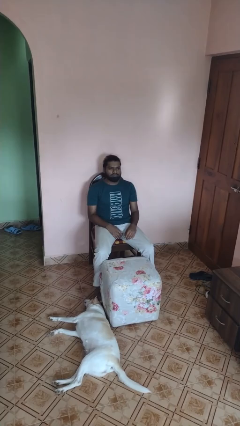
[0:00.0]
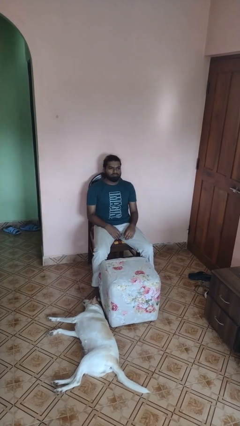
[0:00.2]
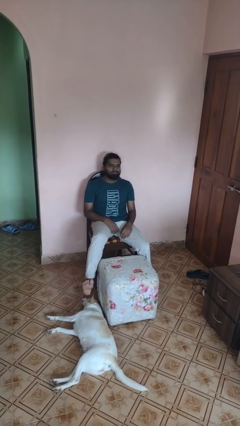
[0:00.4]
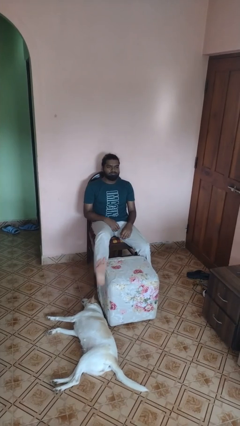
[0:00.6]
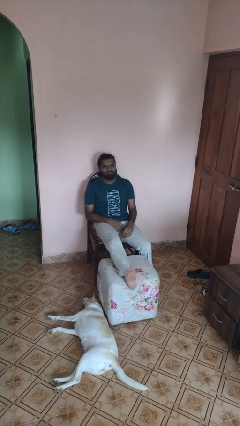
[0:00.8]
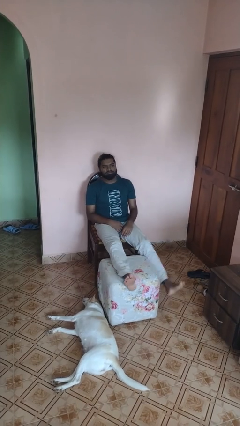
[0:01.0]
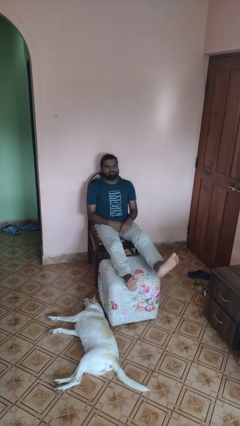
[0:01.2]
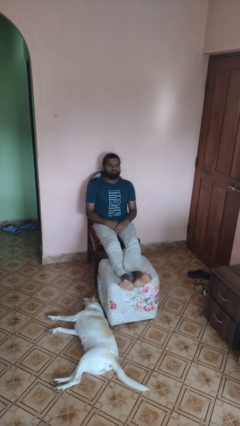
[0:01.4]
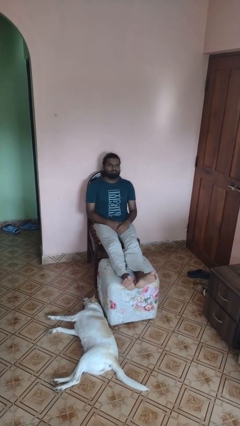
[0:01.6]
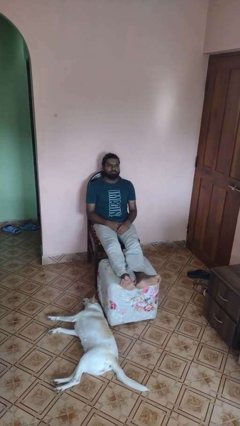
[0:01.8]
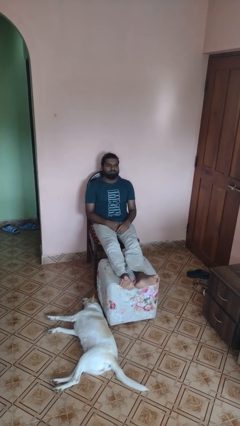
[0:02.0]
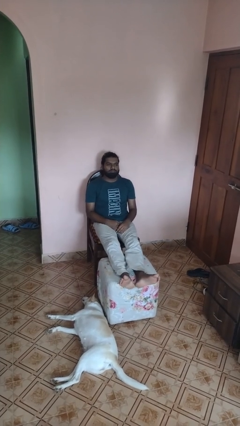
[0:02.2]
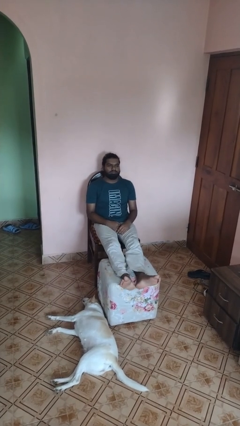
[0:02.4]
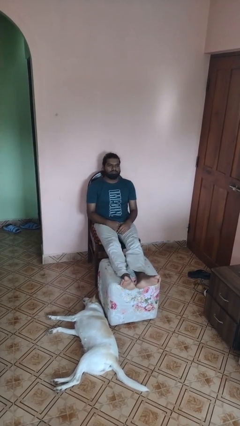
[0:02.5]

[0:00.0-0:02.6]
person puts feet up

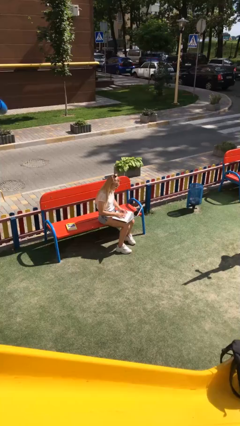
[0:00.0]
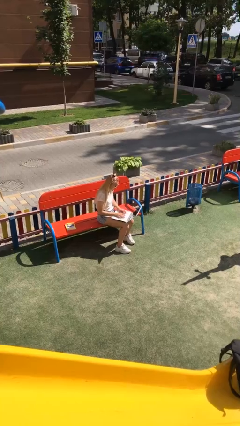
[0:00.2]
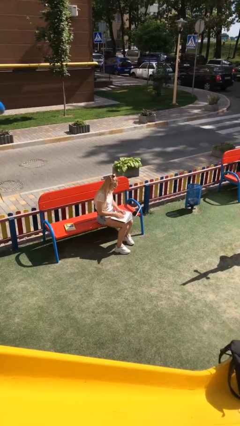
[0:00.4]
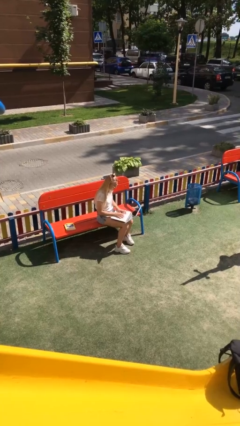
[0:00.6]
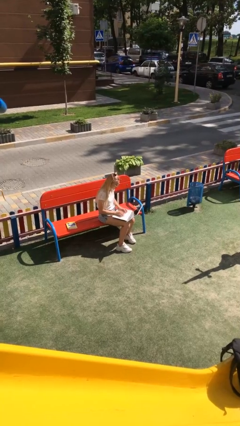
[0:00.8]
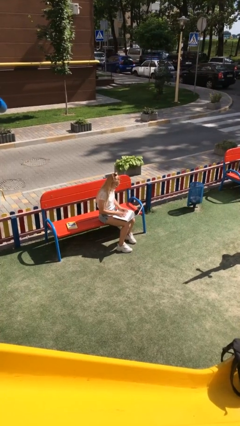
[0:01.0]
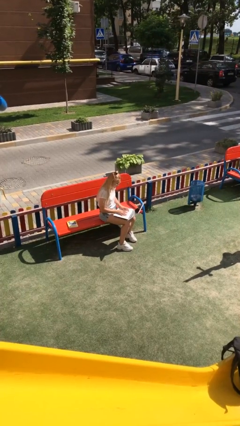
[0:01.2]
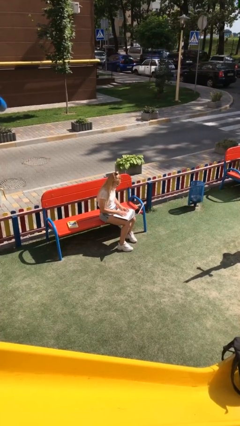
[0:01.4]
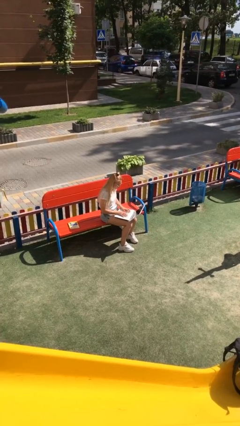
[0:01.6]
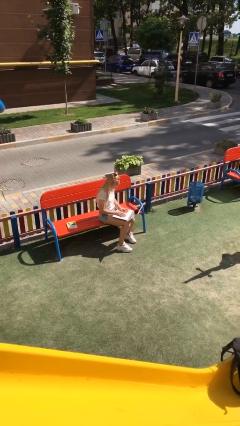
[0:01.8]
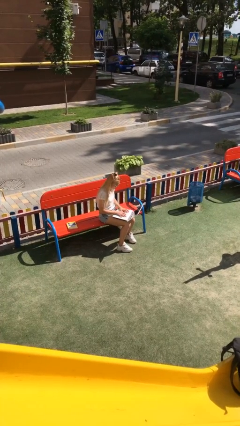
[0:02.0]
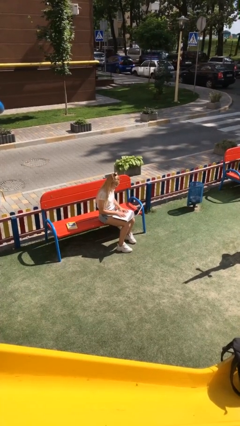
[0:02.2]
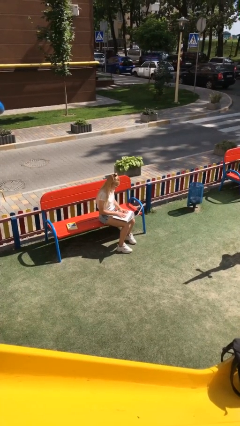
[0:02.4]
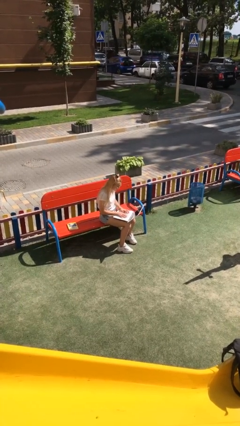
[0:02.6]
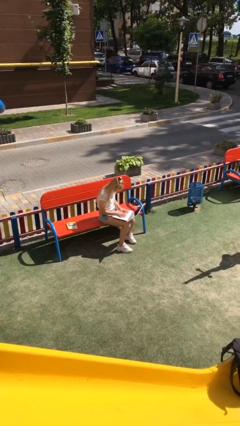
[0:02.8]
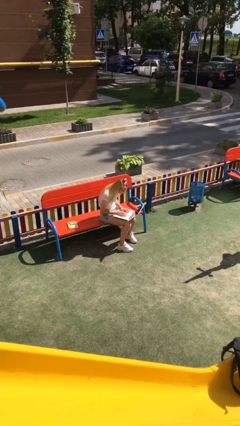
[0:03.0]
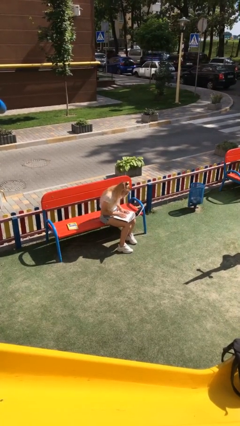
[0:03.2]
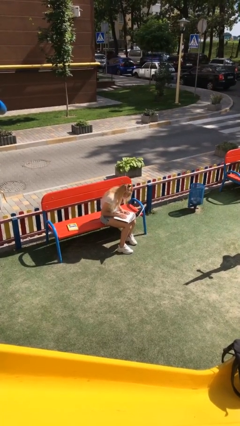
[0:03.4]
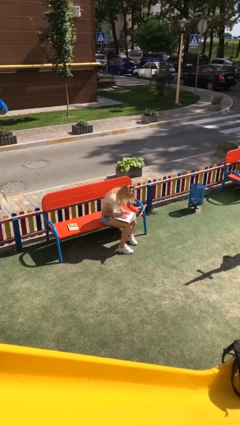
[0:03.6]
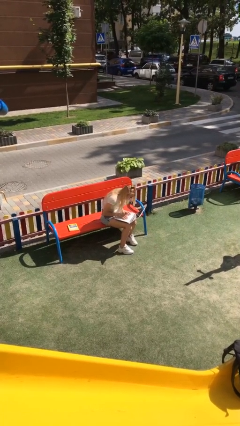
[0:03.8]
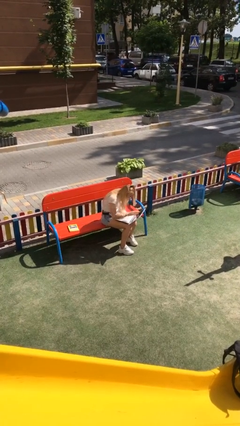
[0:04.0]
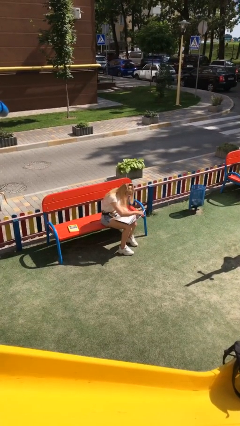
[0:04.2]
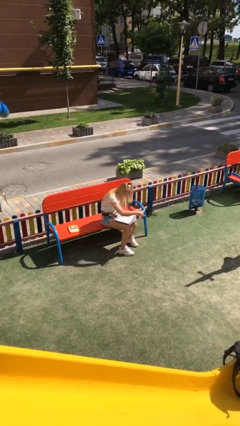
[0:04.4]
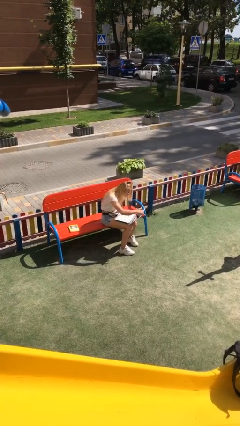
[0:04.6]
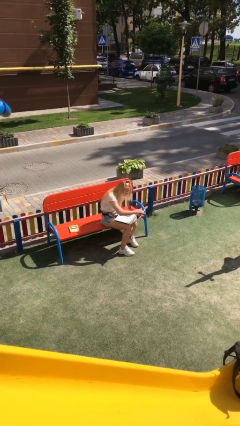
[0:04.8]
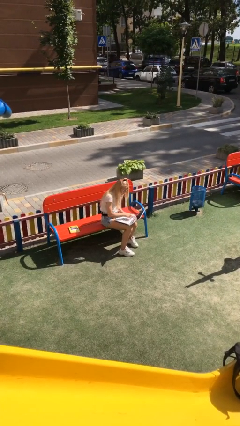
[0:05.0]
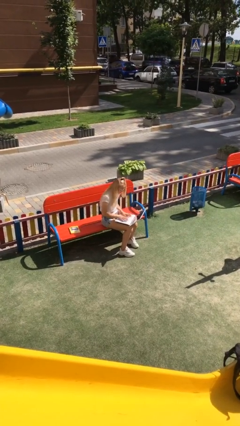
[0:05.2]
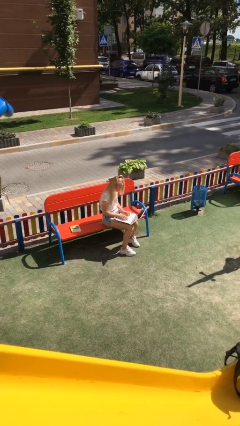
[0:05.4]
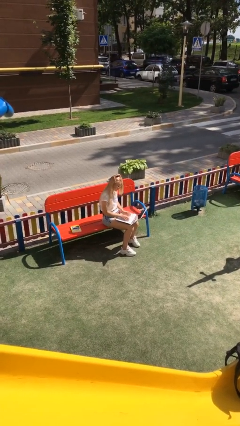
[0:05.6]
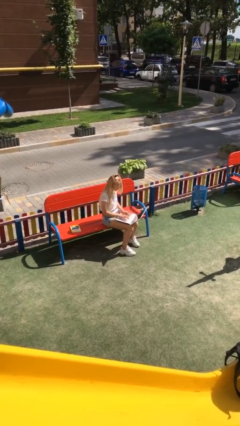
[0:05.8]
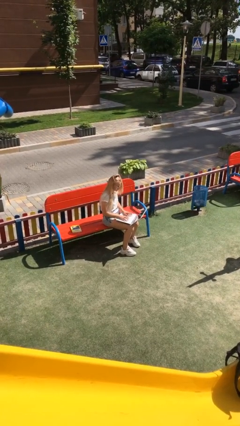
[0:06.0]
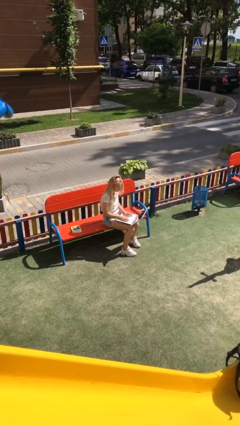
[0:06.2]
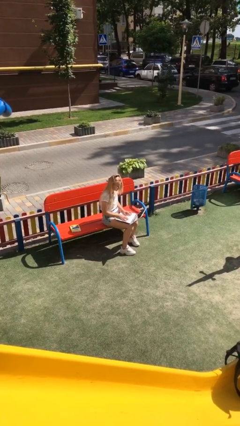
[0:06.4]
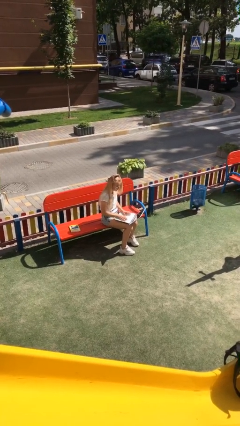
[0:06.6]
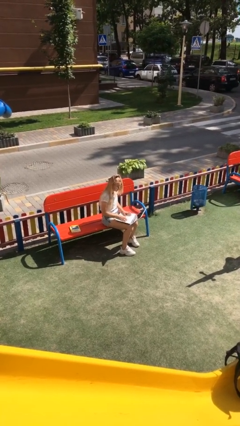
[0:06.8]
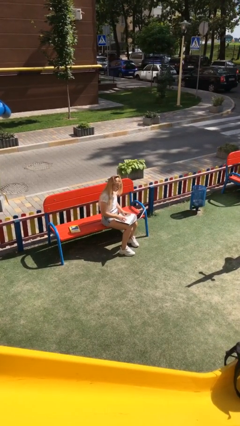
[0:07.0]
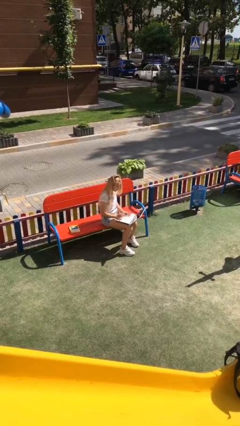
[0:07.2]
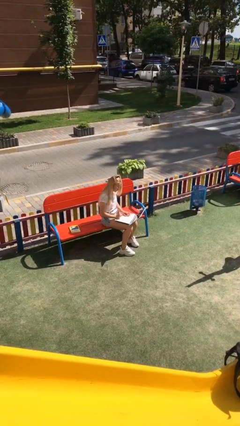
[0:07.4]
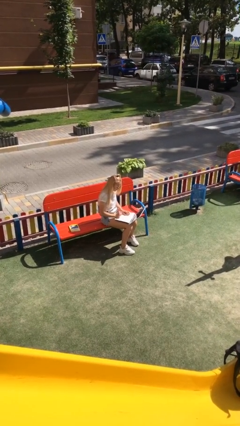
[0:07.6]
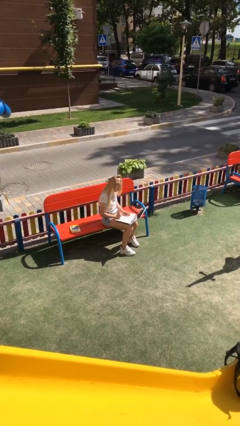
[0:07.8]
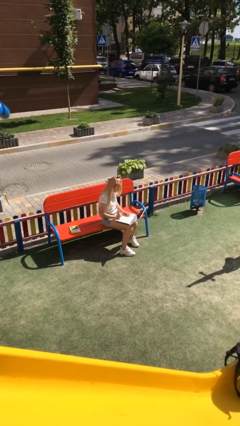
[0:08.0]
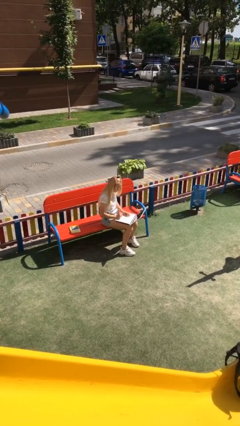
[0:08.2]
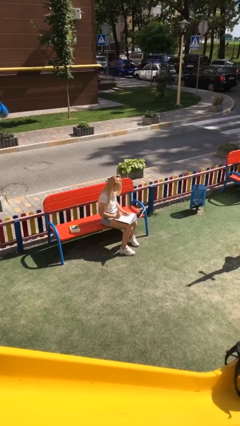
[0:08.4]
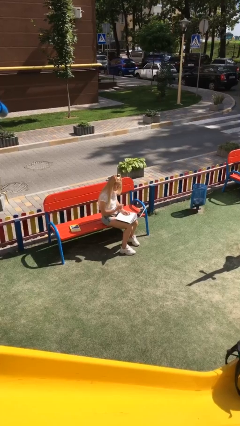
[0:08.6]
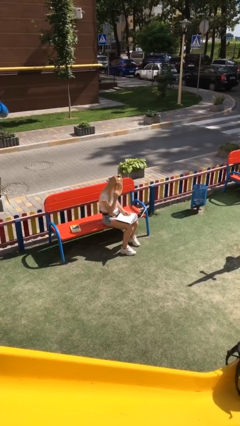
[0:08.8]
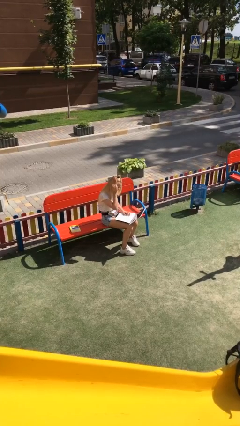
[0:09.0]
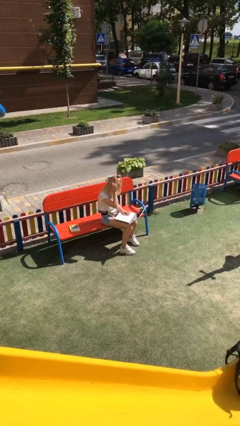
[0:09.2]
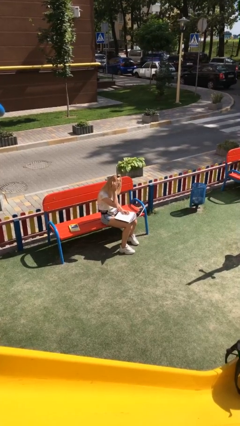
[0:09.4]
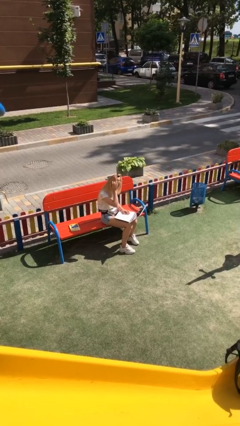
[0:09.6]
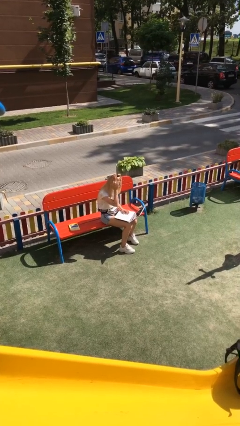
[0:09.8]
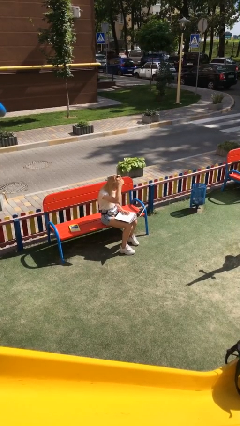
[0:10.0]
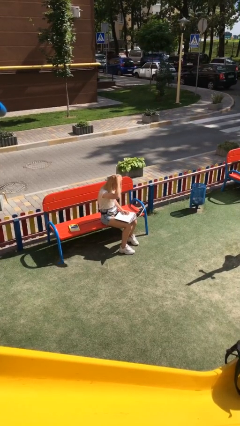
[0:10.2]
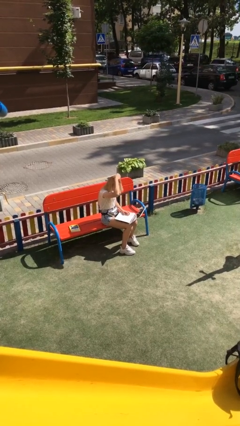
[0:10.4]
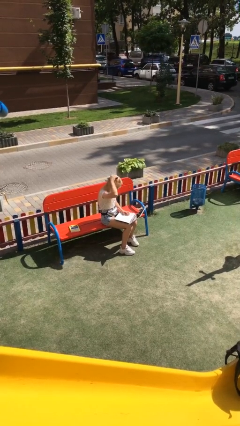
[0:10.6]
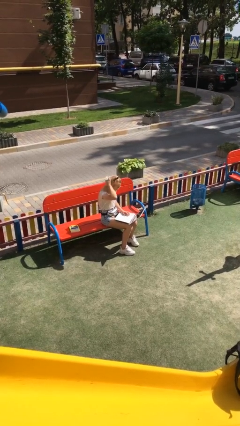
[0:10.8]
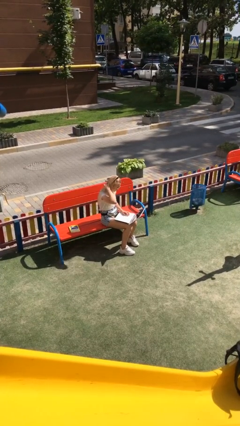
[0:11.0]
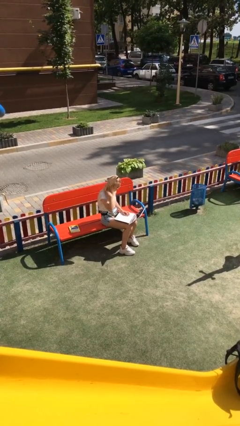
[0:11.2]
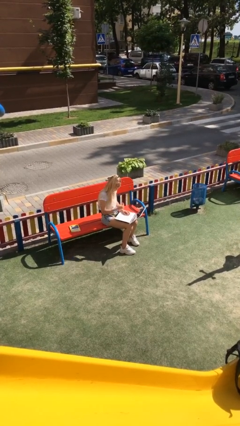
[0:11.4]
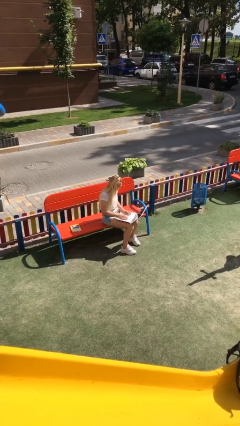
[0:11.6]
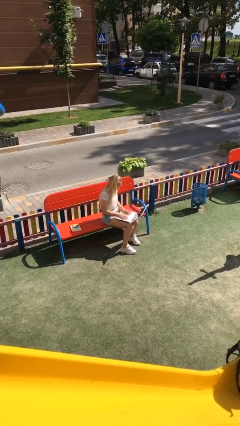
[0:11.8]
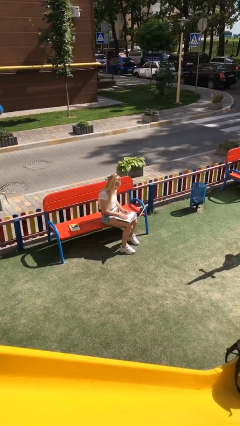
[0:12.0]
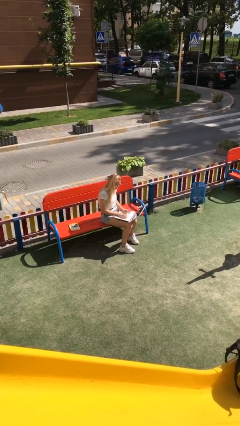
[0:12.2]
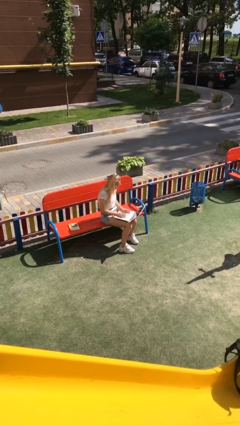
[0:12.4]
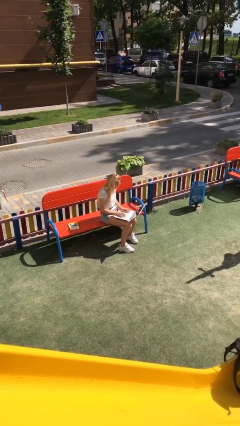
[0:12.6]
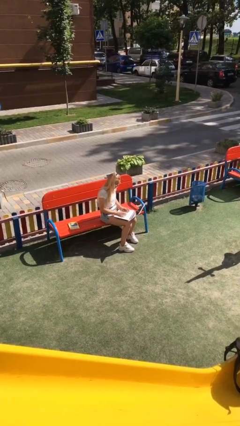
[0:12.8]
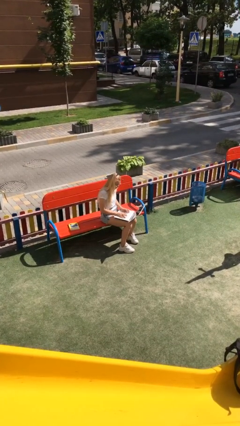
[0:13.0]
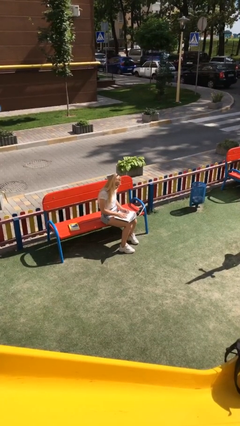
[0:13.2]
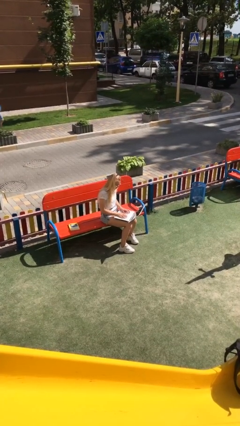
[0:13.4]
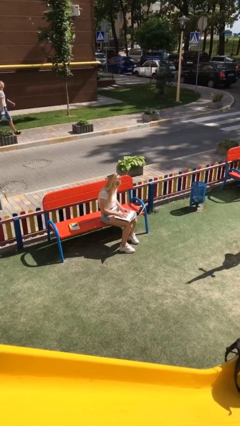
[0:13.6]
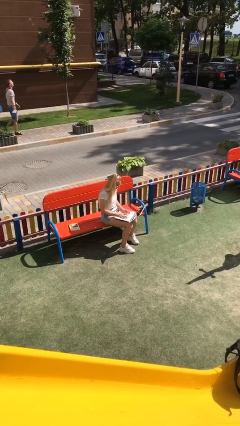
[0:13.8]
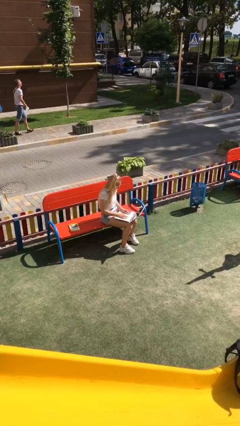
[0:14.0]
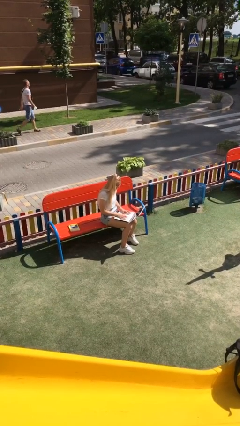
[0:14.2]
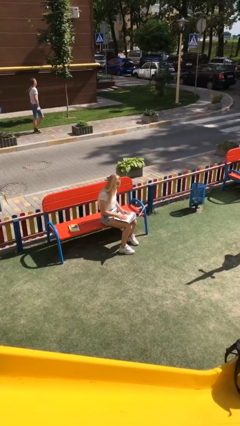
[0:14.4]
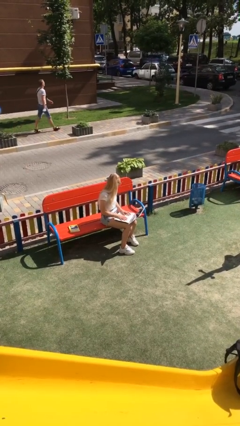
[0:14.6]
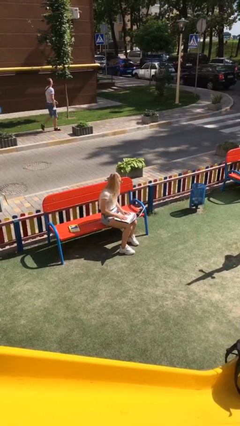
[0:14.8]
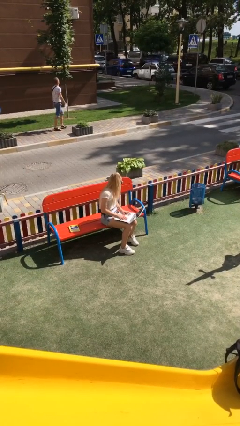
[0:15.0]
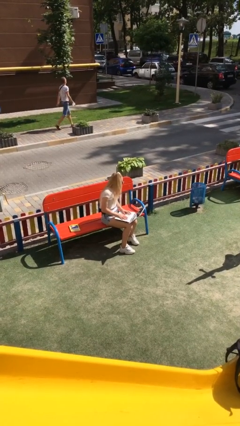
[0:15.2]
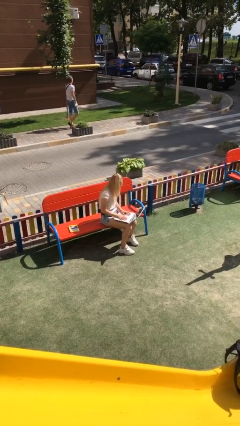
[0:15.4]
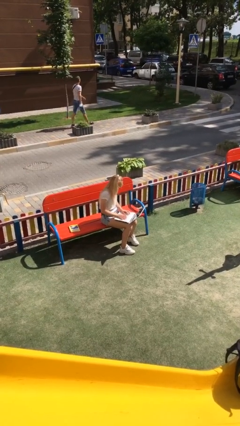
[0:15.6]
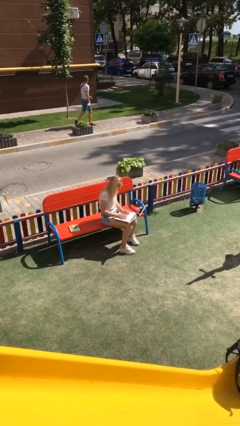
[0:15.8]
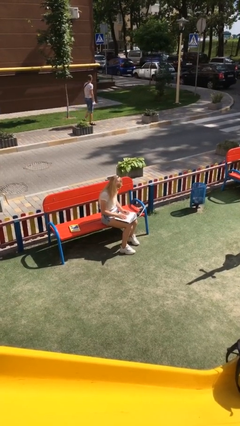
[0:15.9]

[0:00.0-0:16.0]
person interacts with laptop
